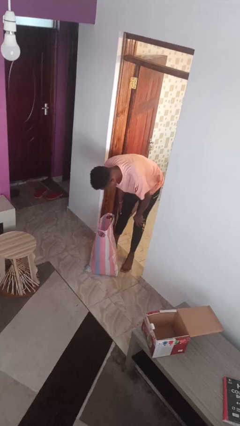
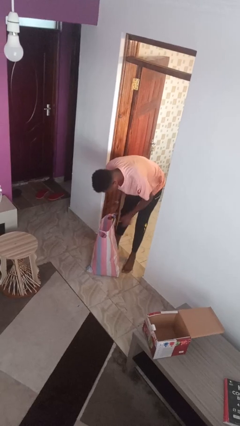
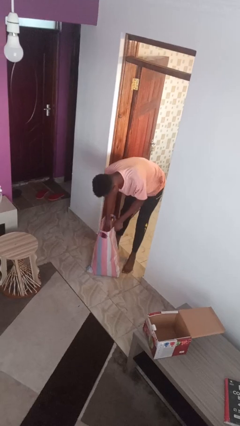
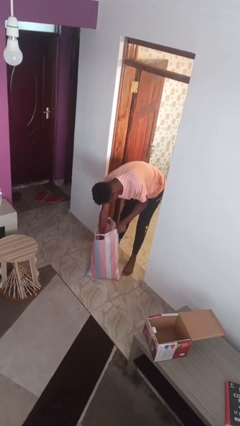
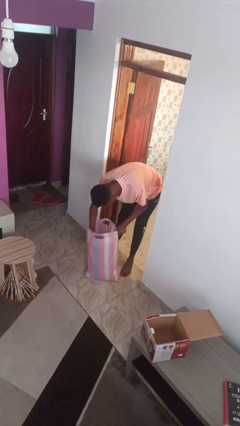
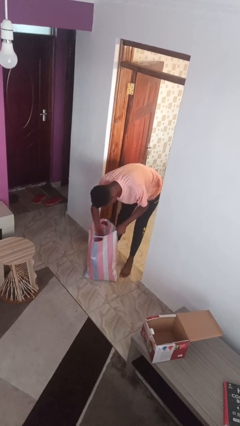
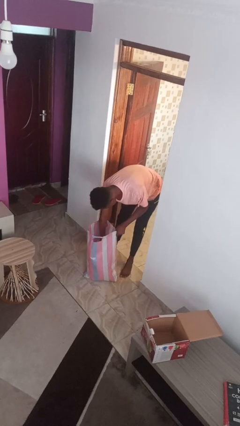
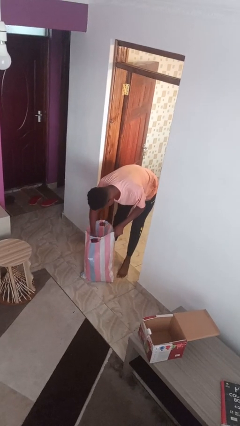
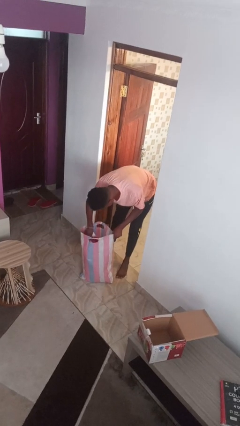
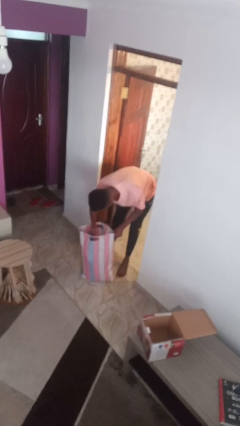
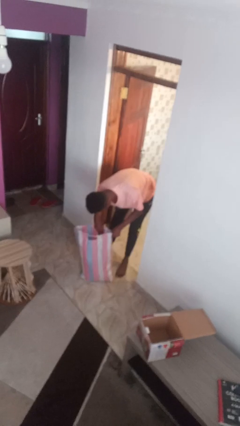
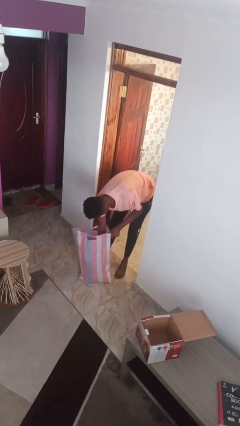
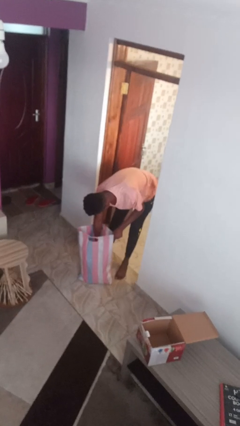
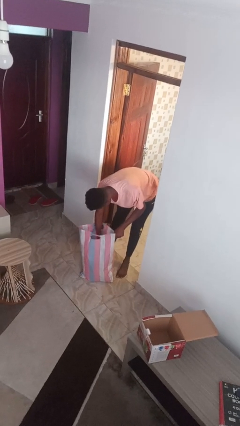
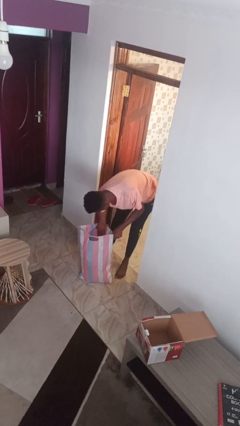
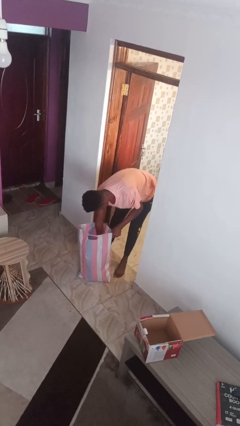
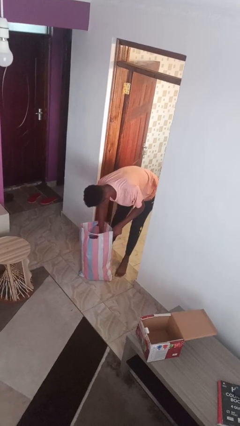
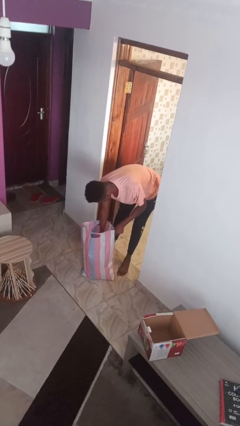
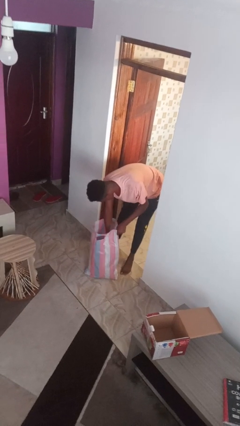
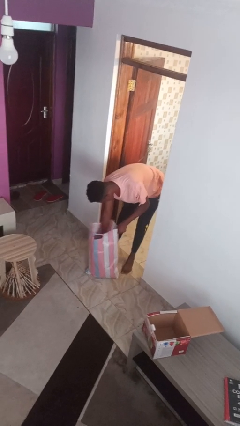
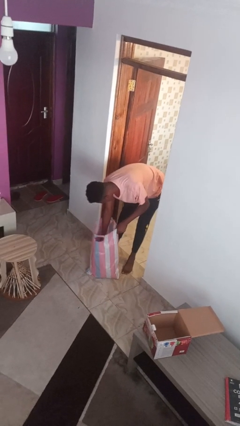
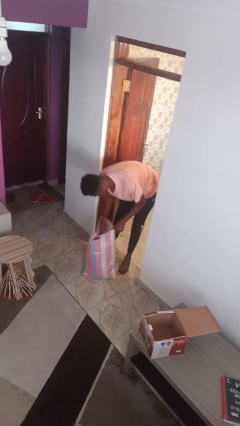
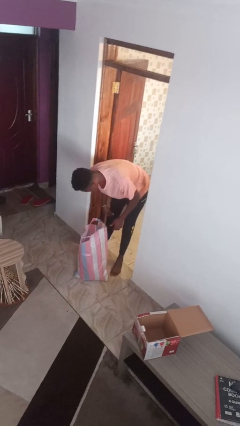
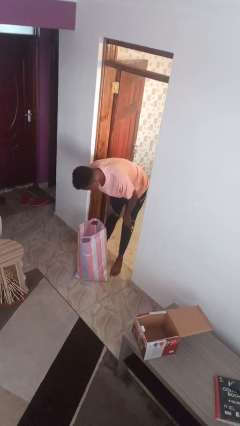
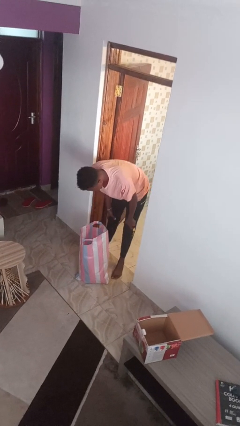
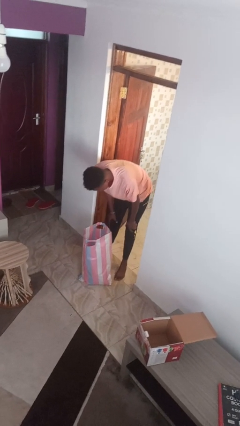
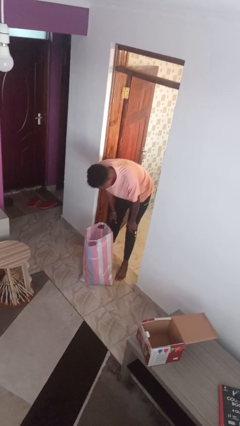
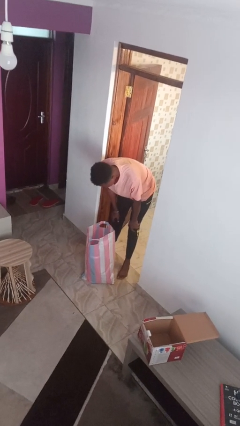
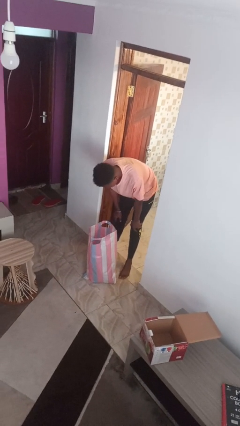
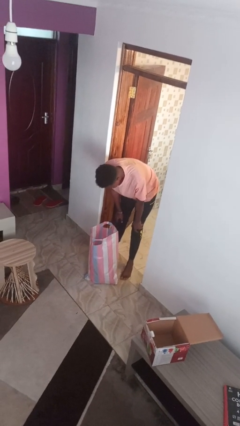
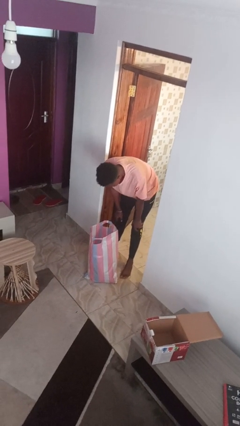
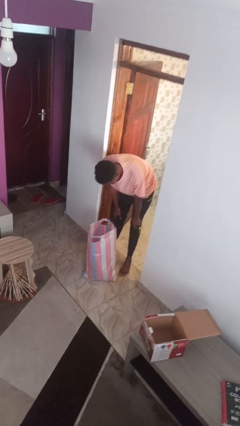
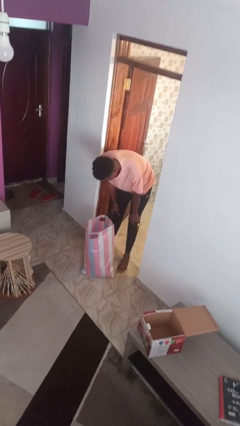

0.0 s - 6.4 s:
person searches in bag

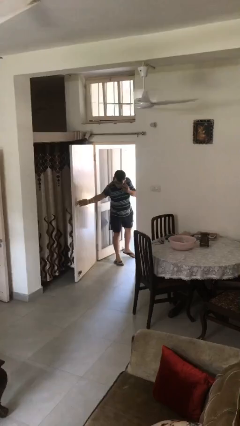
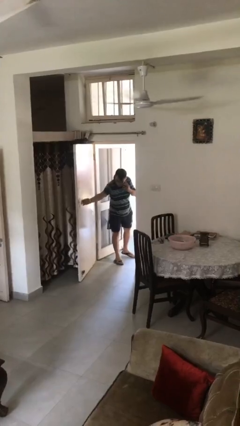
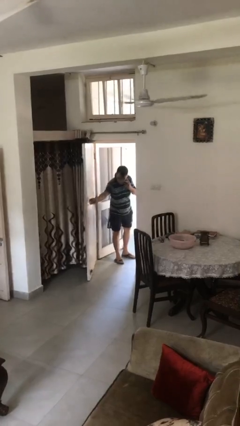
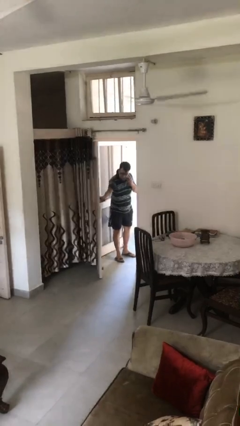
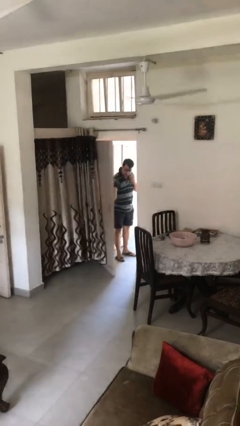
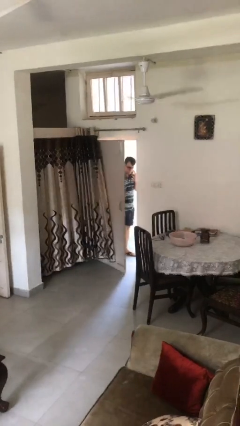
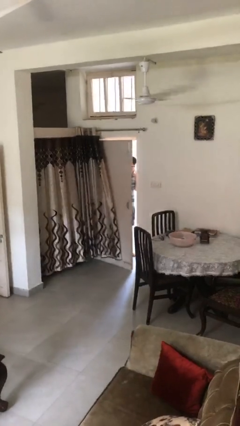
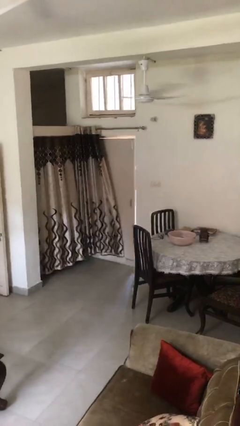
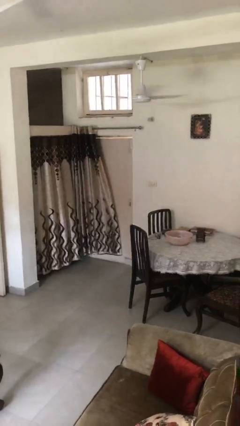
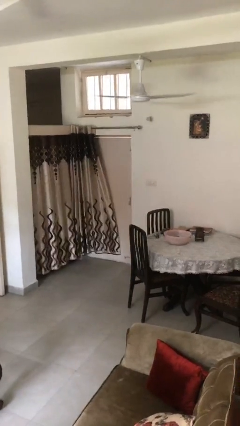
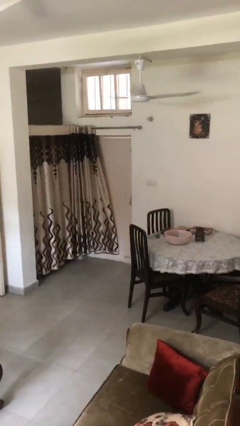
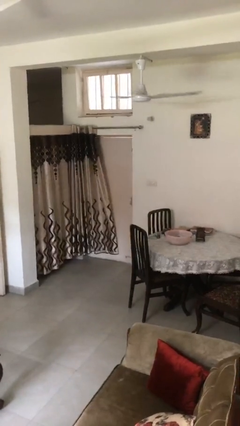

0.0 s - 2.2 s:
person closes facility door

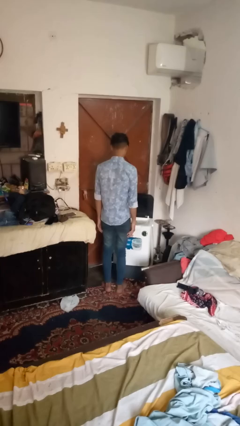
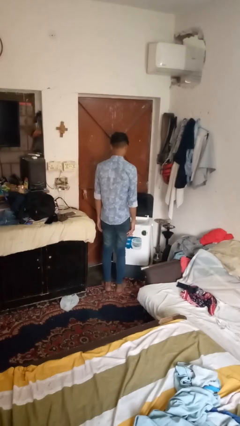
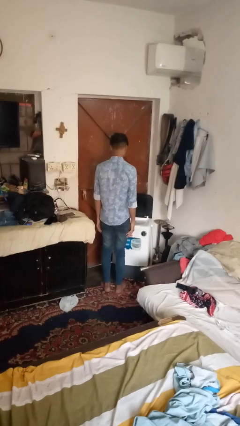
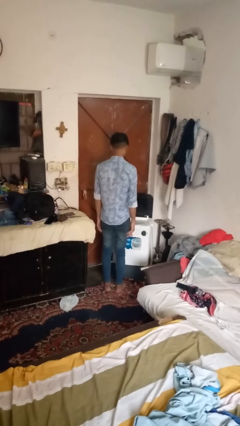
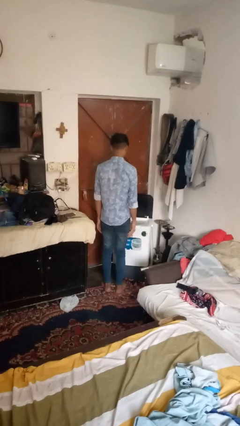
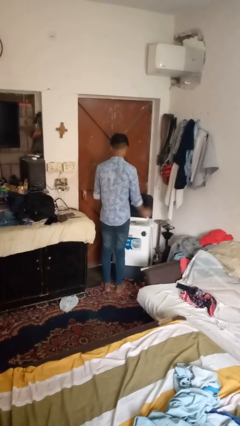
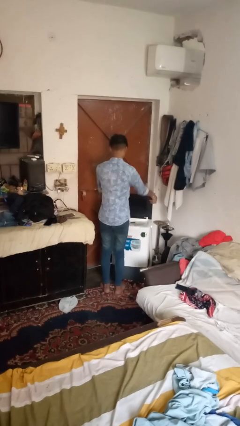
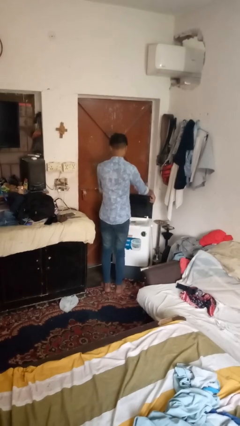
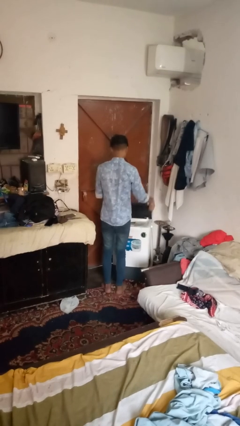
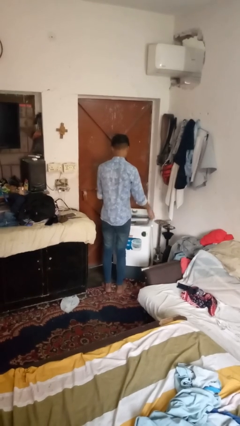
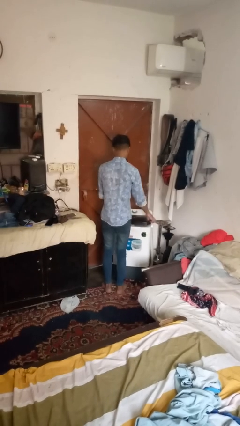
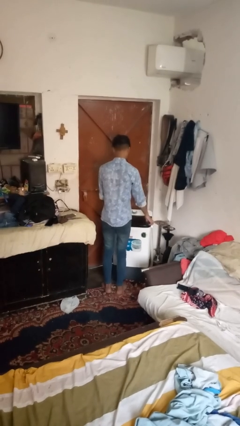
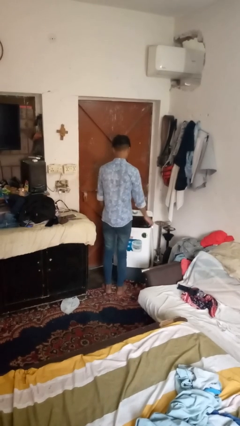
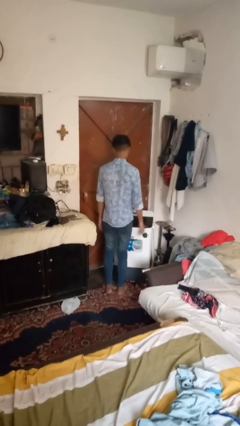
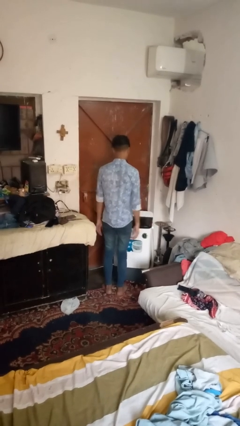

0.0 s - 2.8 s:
person closes clothes washer

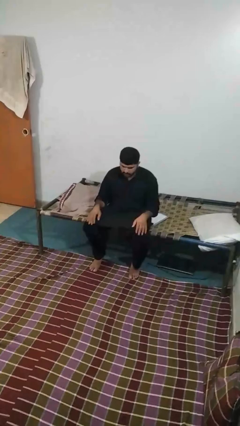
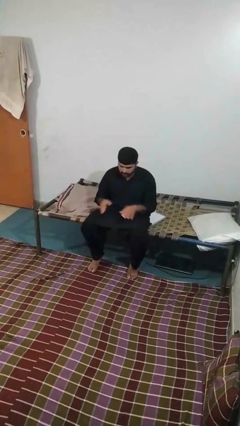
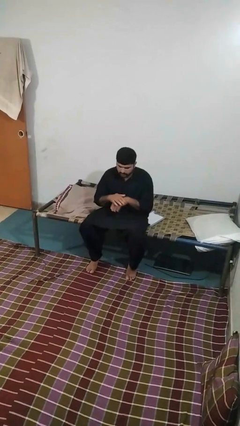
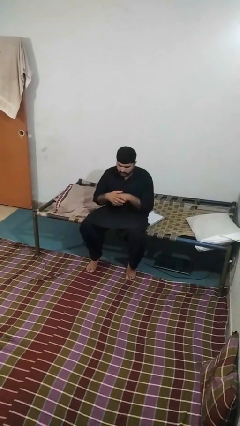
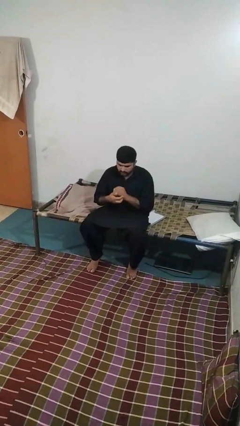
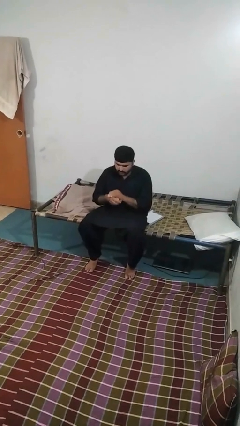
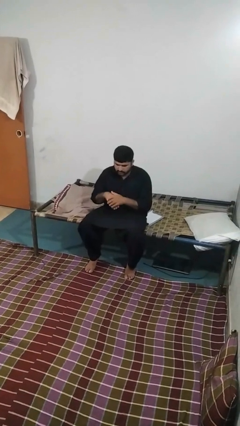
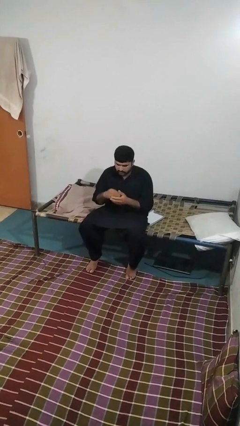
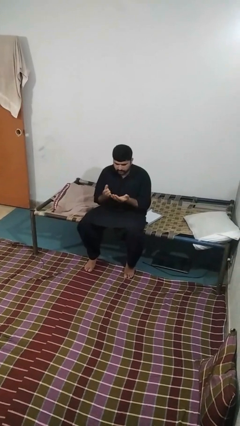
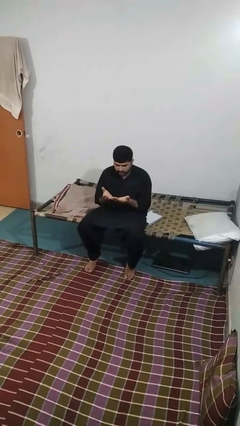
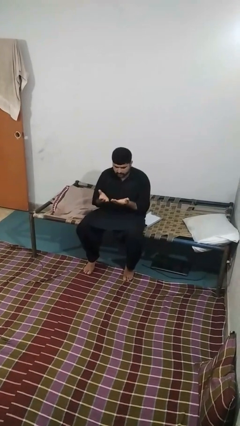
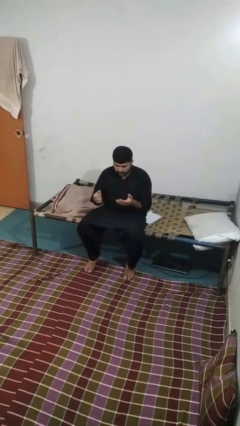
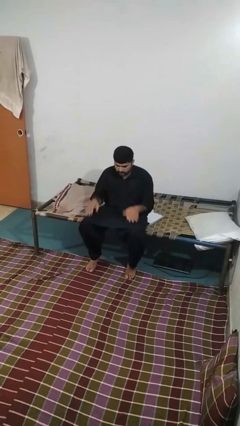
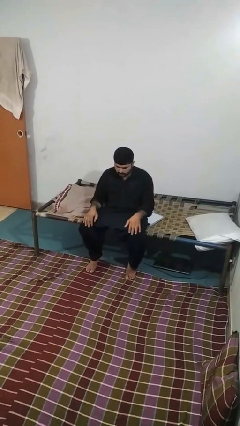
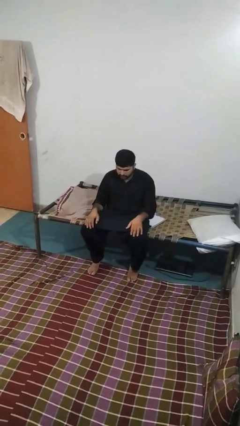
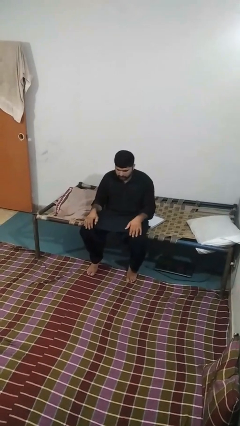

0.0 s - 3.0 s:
person looks at hands in lap

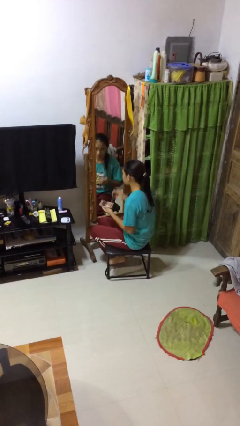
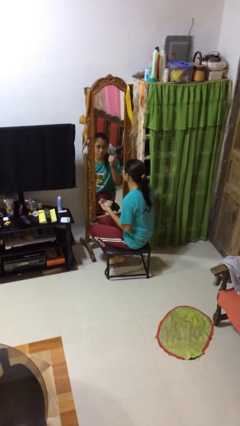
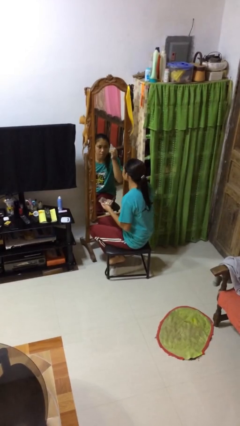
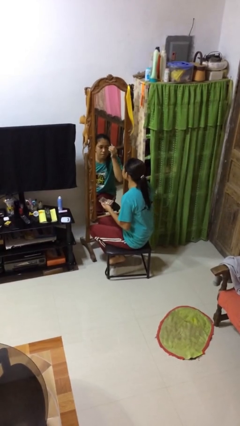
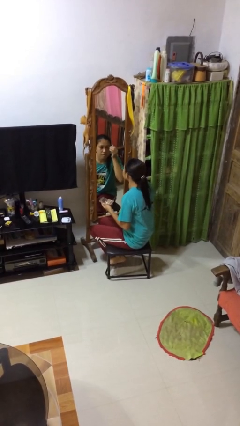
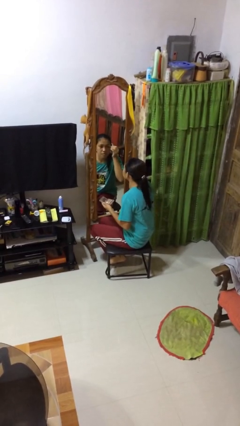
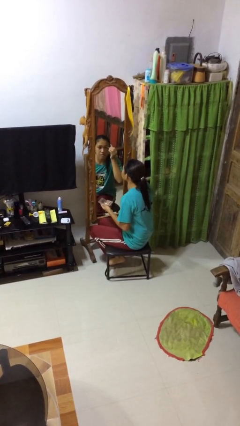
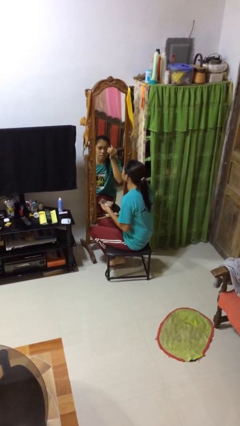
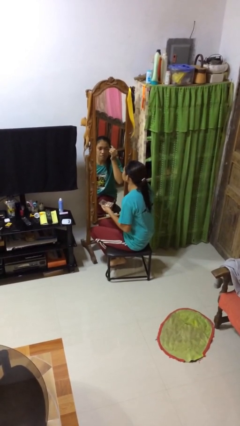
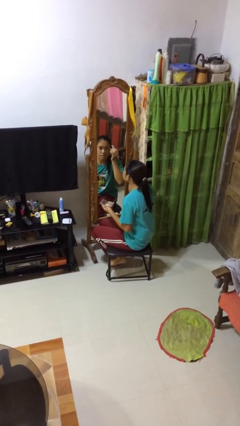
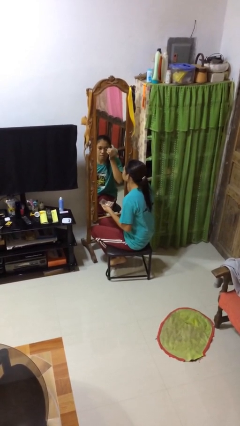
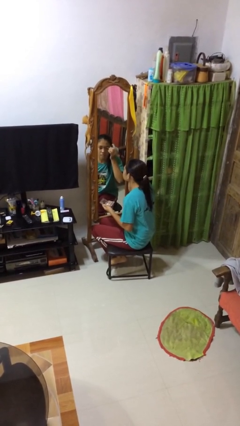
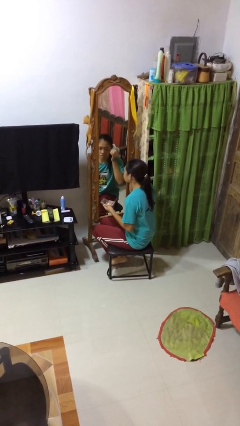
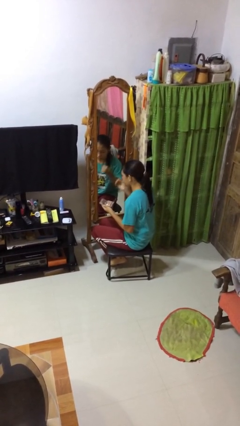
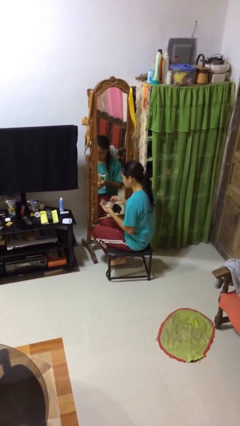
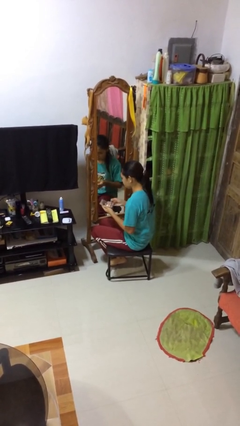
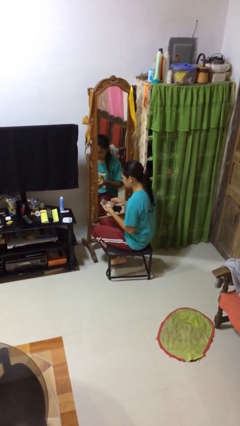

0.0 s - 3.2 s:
person applies eye makeup
